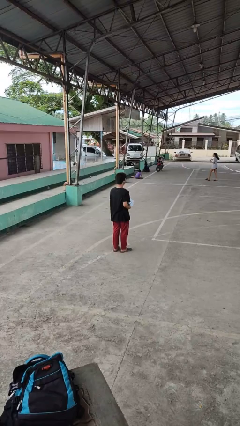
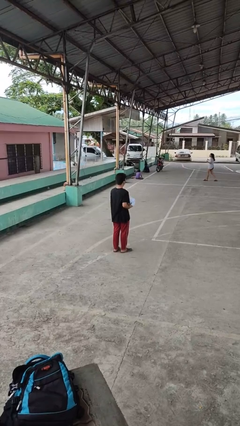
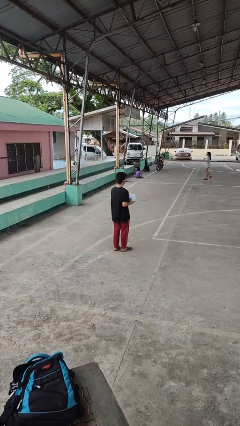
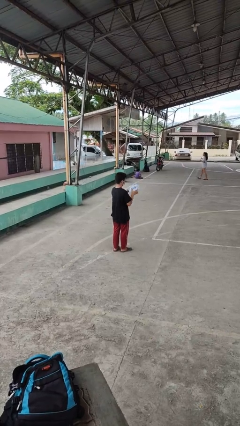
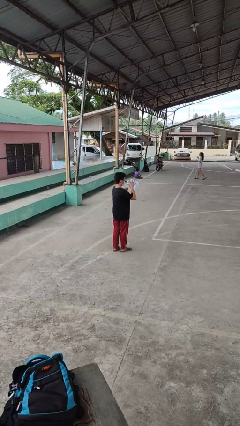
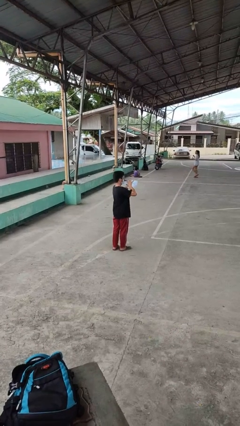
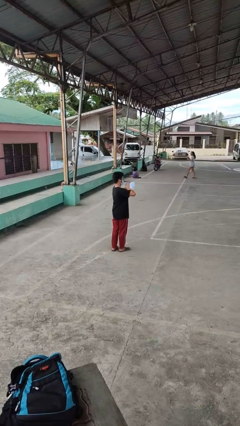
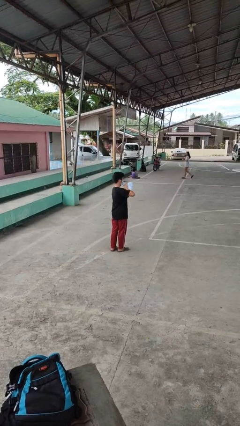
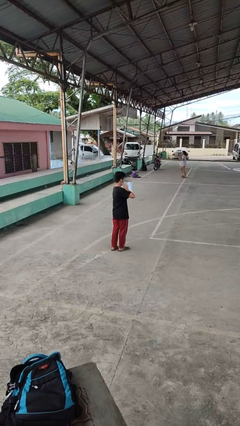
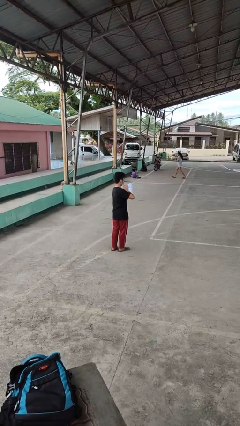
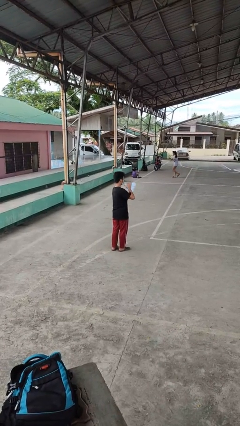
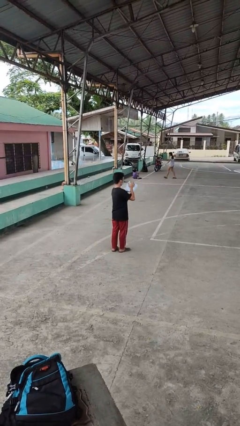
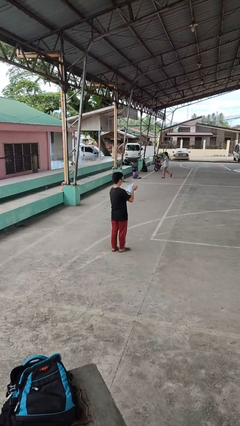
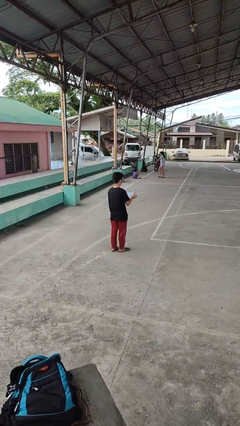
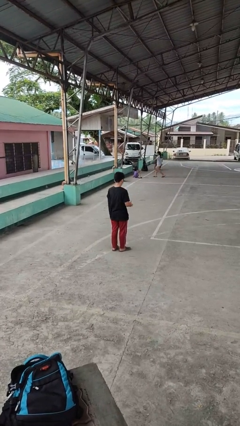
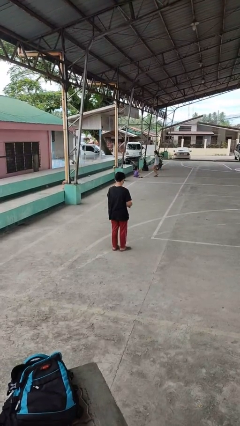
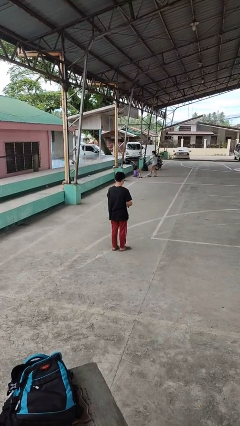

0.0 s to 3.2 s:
person squeezes object

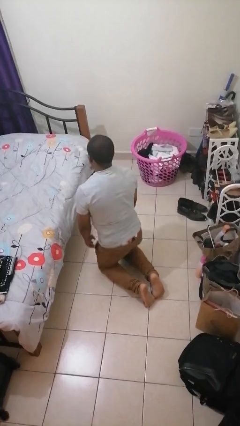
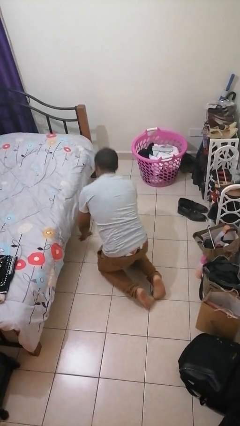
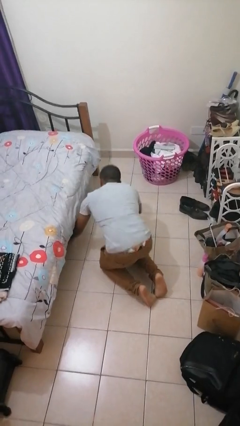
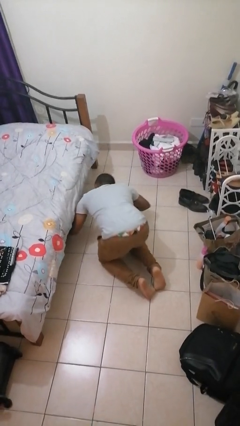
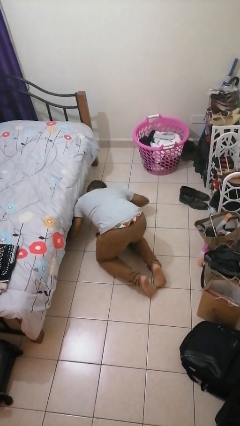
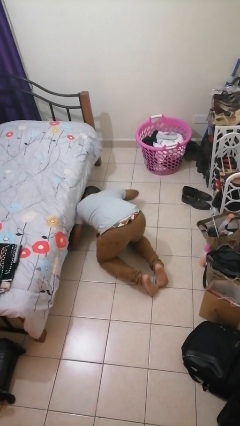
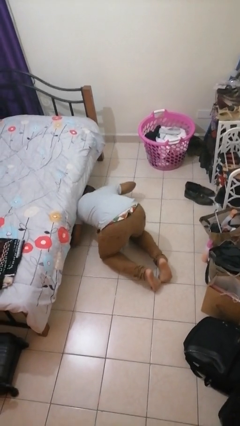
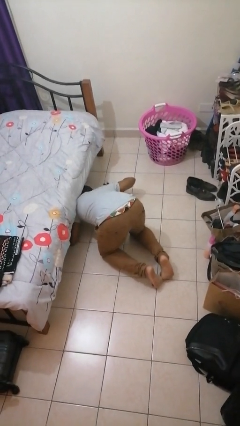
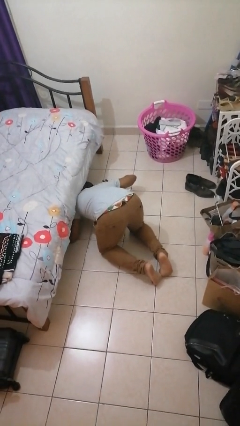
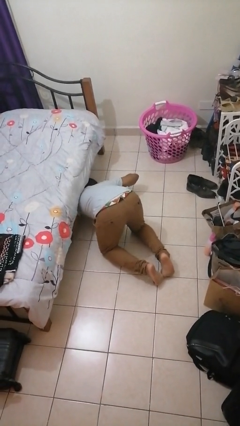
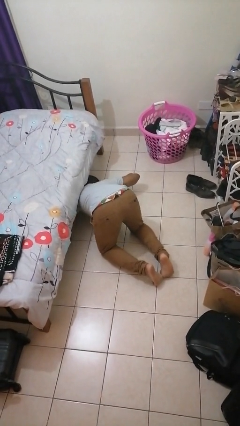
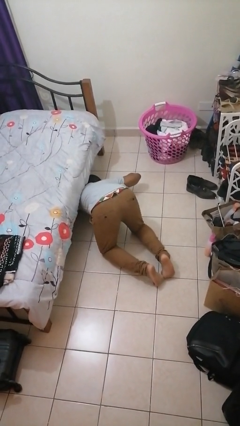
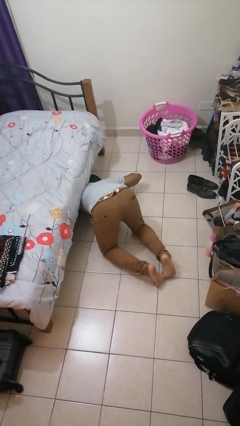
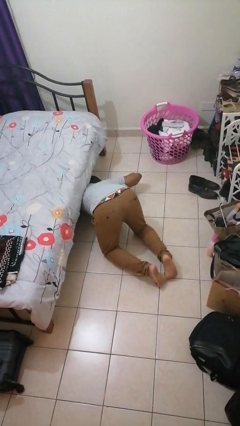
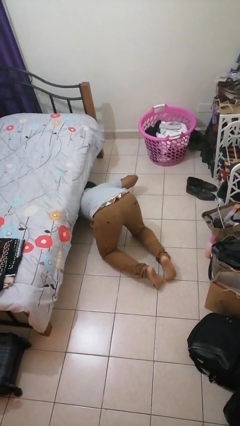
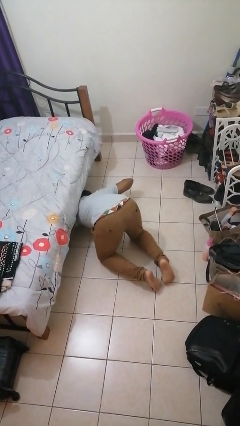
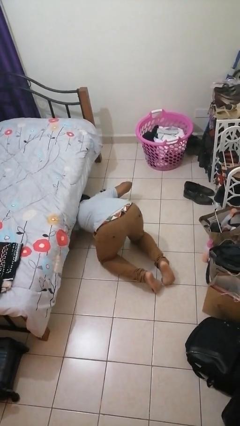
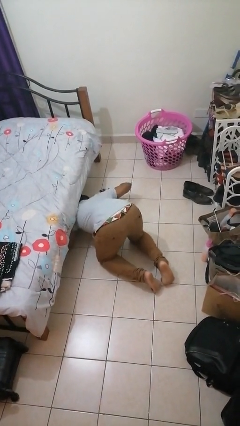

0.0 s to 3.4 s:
person searches under bed

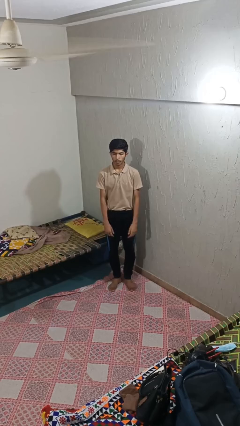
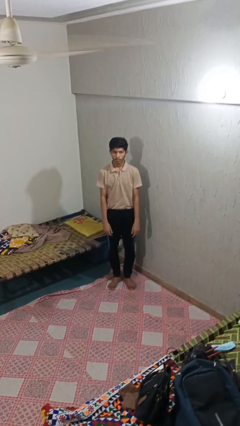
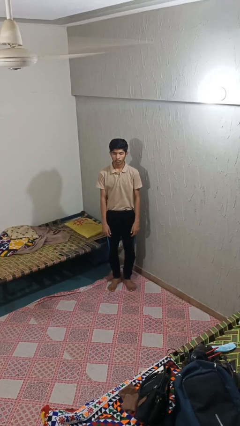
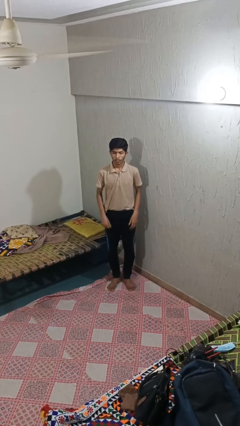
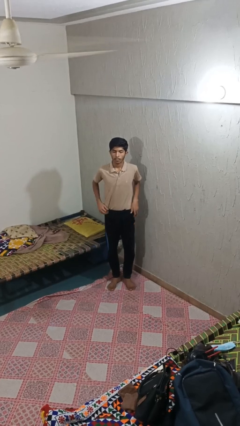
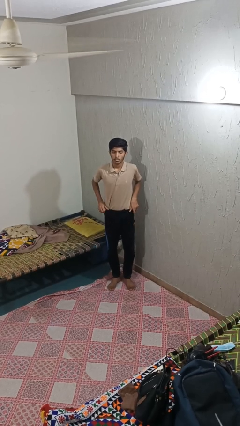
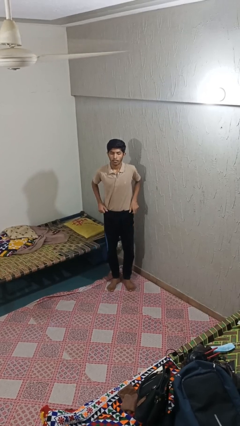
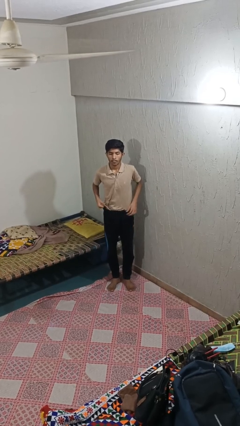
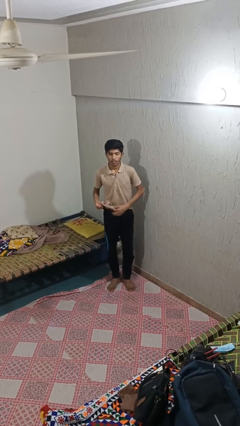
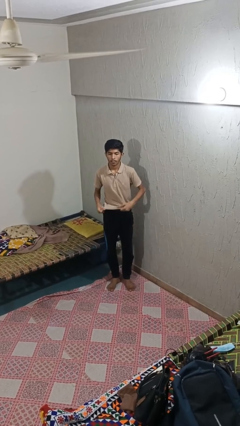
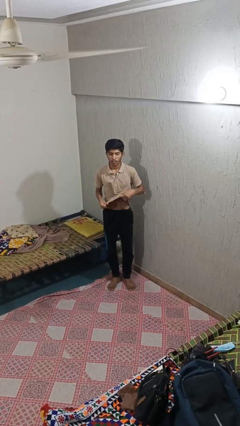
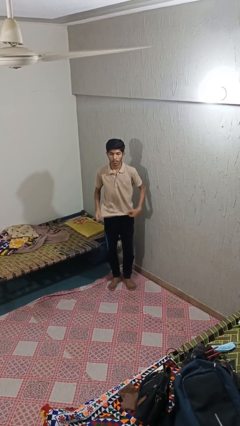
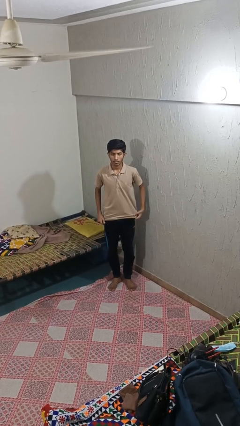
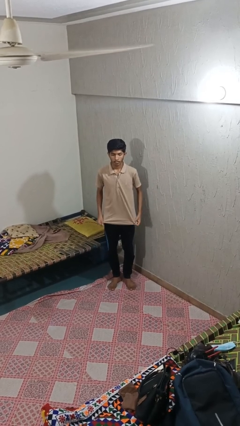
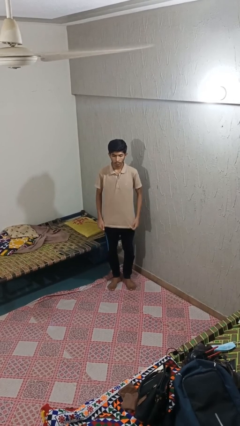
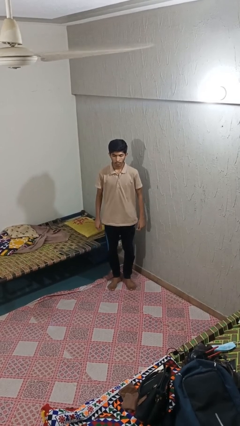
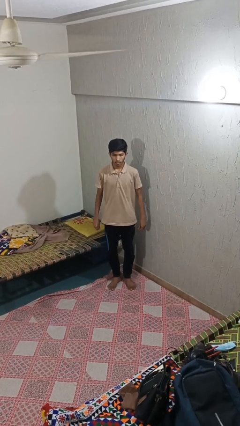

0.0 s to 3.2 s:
person untucks shirt

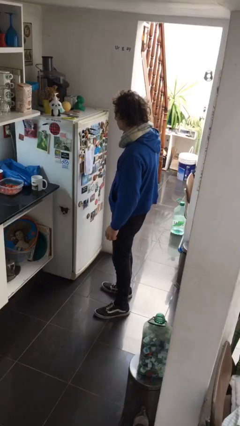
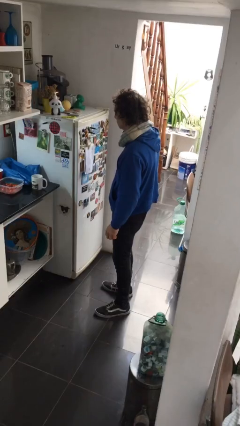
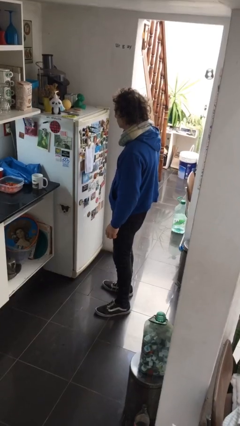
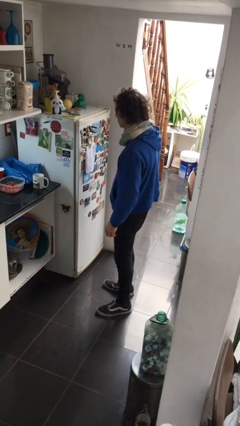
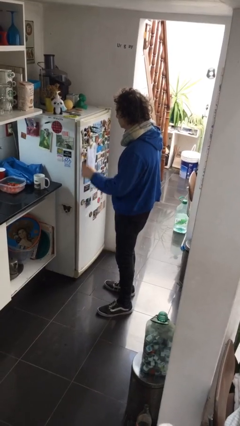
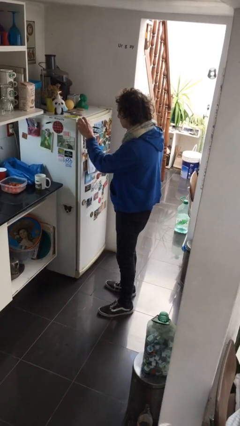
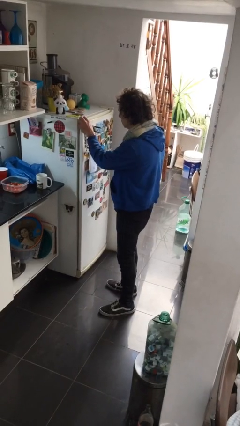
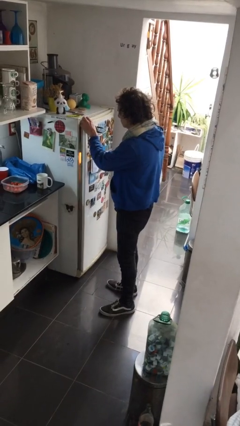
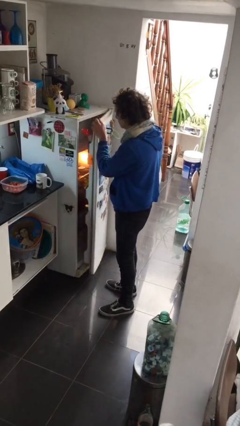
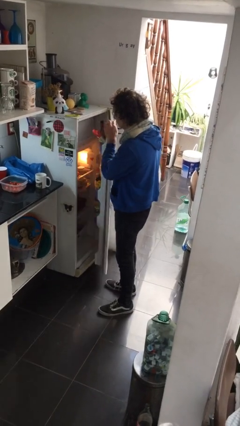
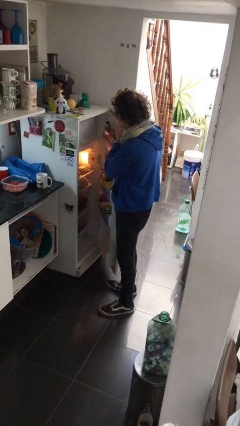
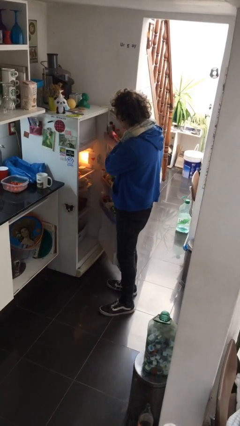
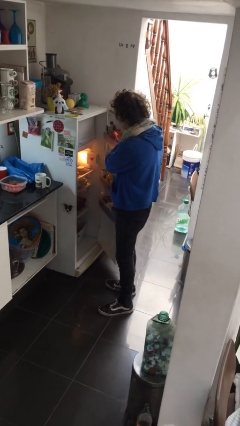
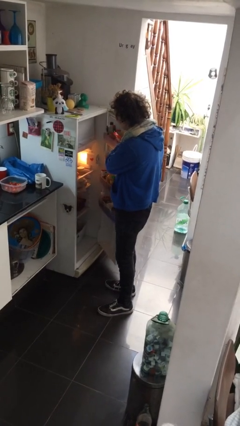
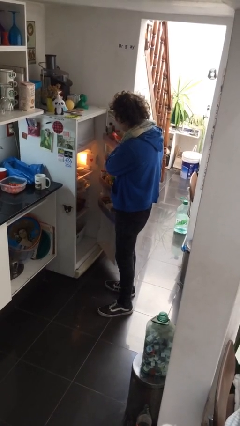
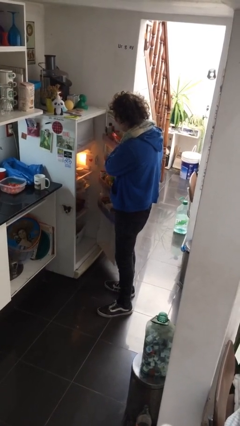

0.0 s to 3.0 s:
person opens refrigerator

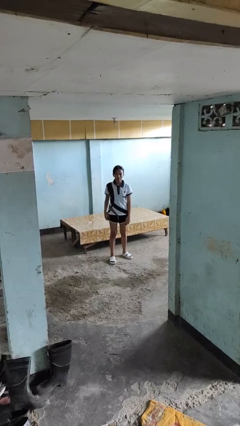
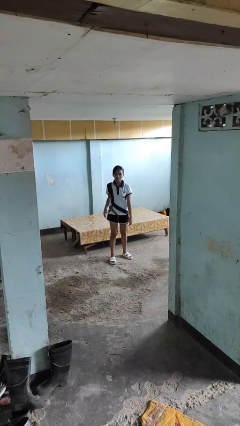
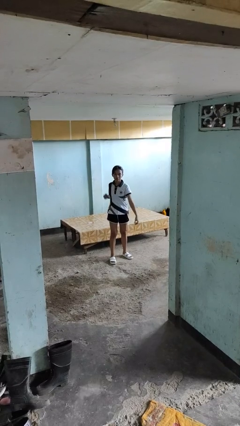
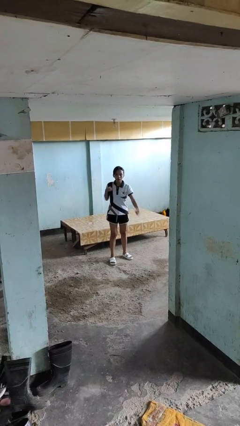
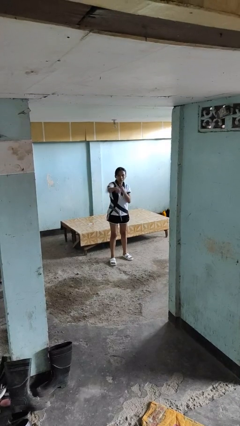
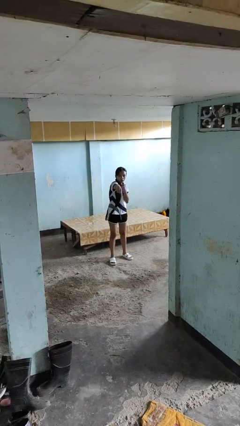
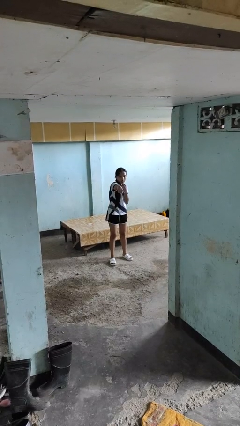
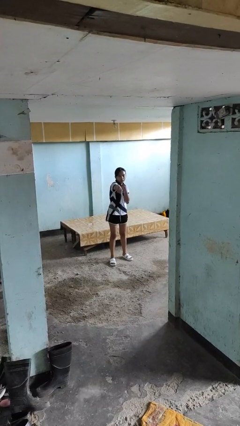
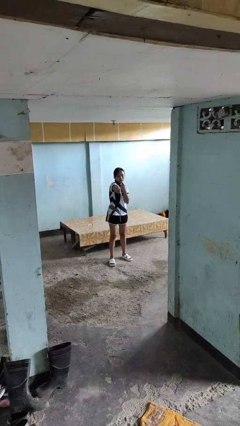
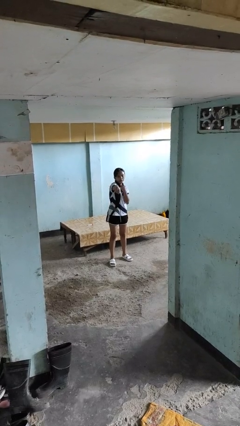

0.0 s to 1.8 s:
person punches

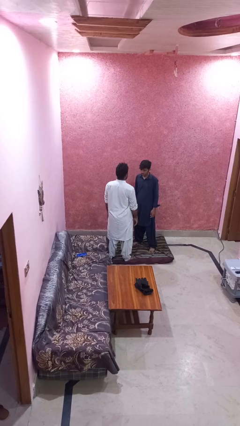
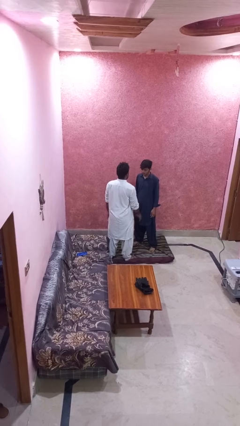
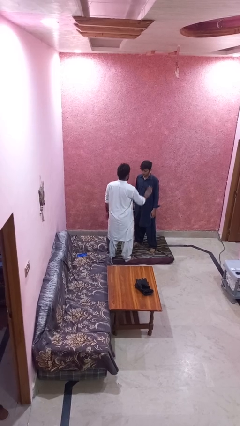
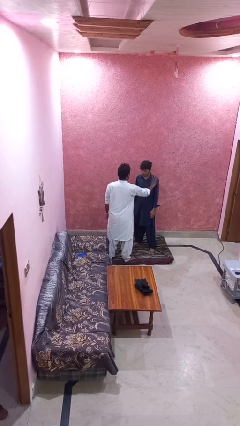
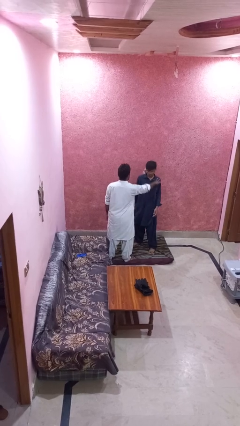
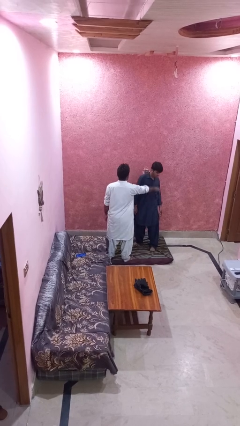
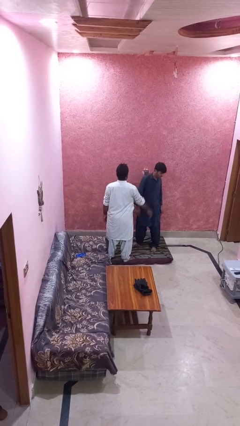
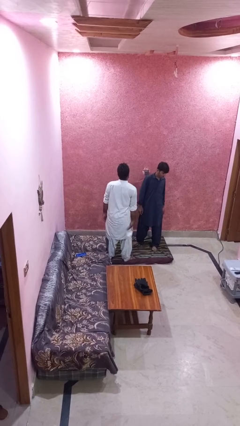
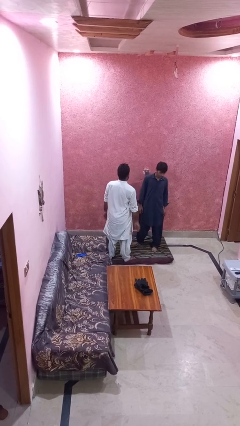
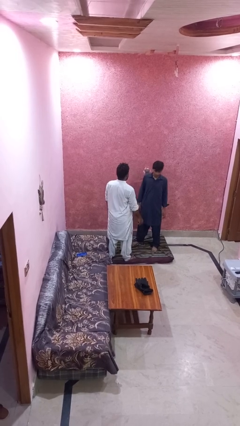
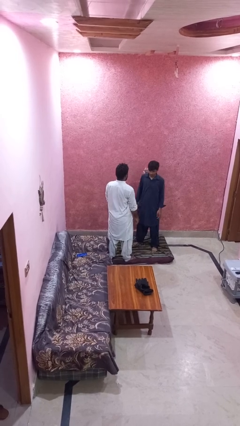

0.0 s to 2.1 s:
person shoves person

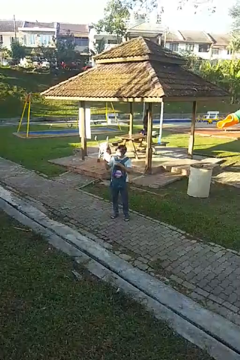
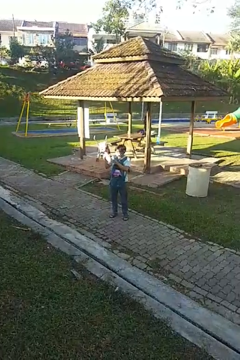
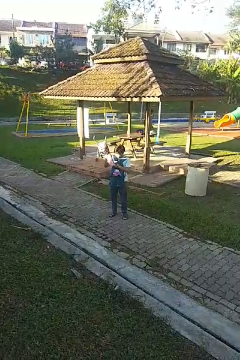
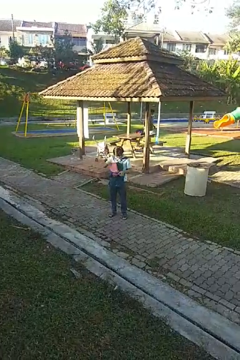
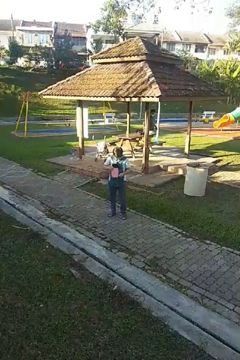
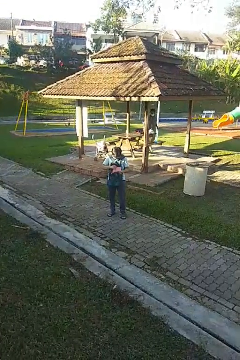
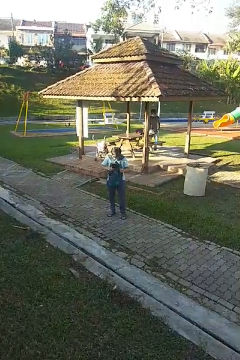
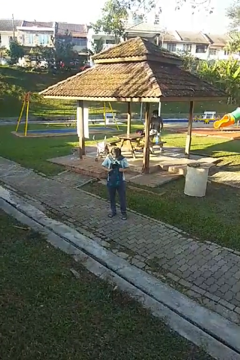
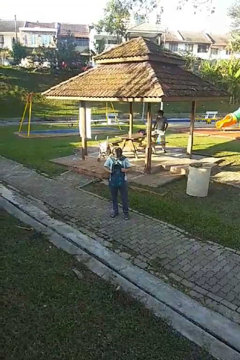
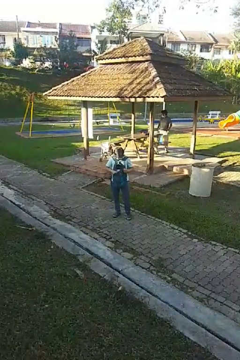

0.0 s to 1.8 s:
person puts object into backpack
